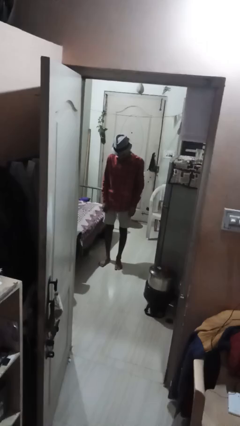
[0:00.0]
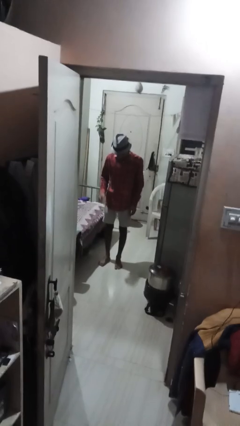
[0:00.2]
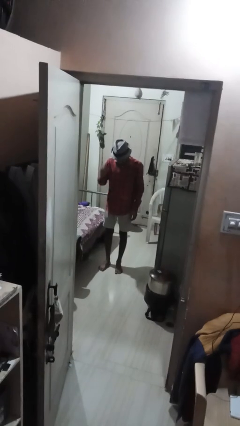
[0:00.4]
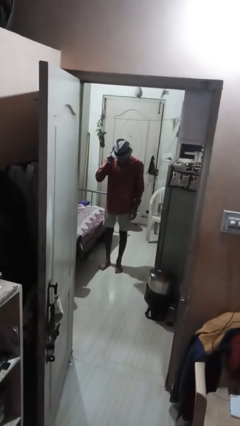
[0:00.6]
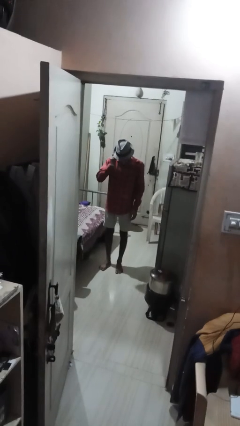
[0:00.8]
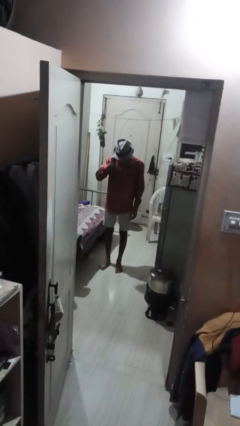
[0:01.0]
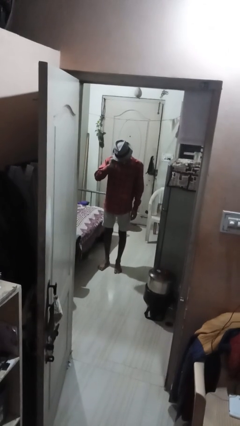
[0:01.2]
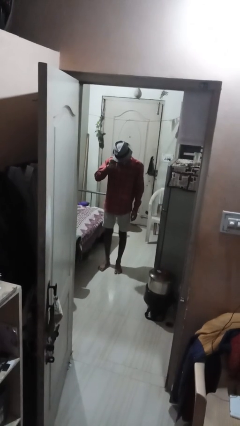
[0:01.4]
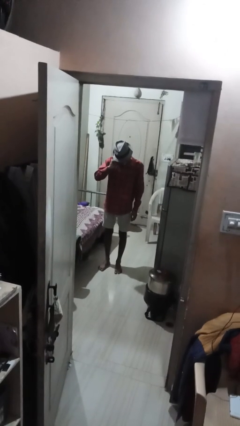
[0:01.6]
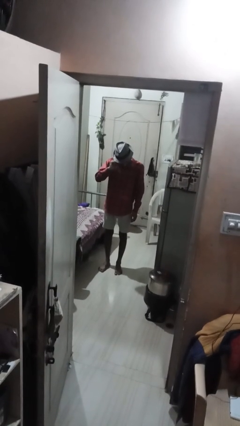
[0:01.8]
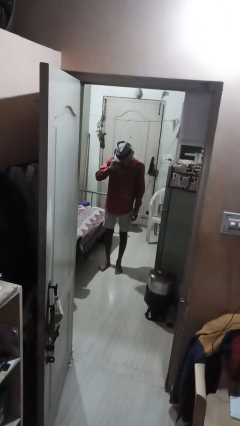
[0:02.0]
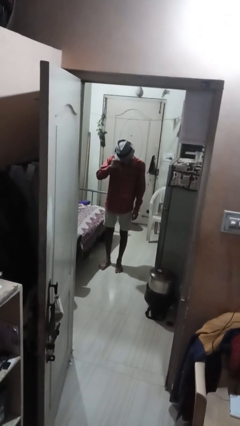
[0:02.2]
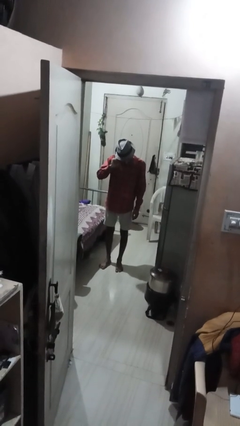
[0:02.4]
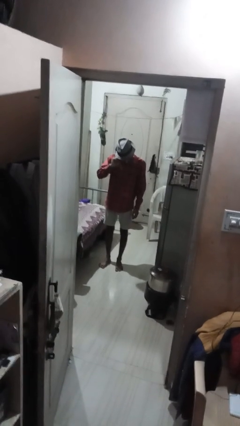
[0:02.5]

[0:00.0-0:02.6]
person touches earlobe

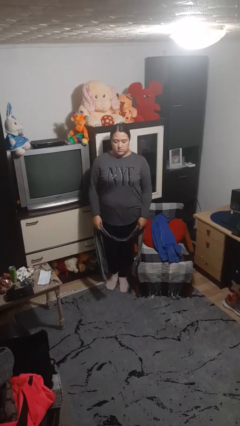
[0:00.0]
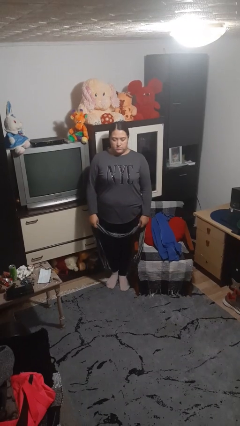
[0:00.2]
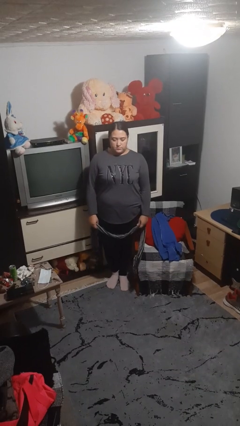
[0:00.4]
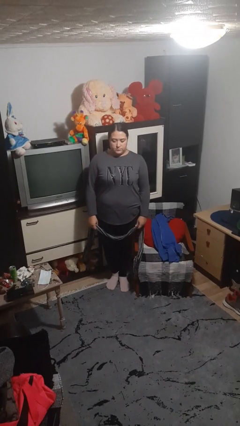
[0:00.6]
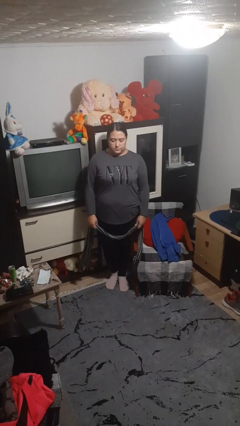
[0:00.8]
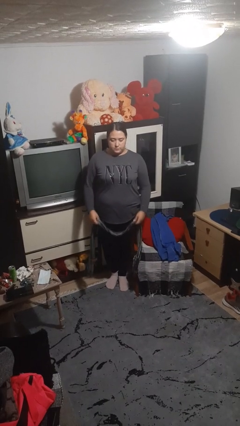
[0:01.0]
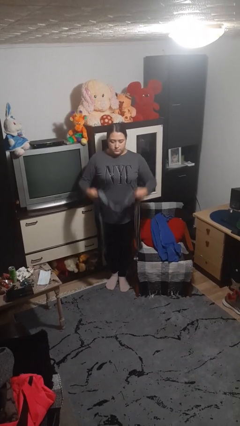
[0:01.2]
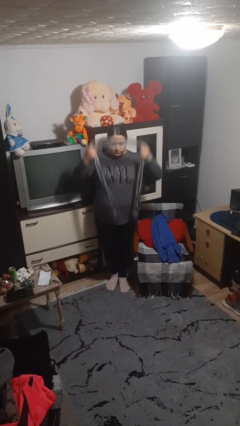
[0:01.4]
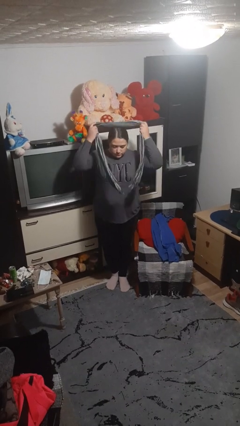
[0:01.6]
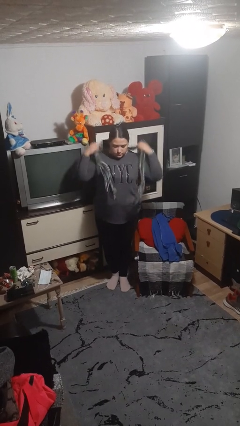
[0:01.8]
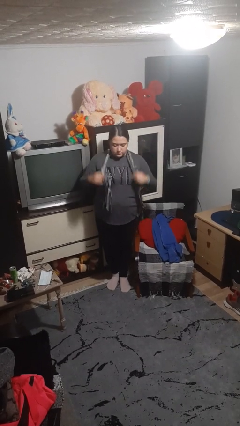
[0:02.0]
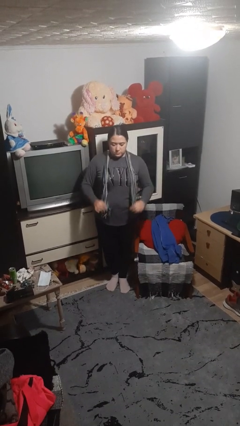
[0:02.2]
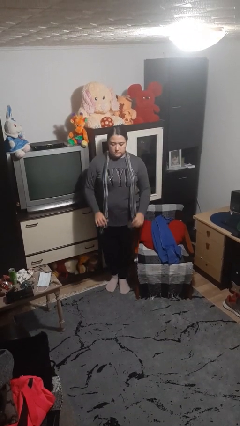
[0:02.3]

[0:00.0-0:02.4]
person puts on scarf

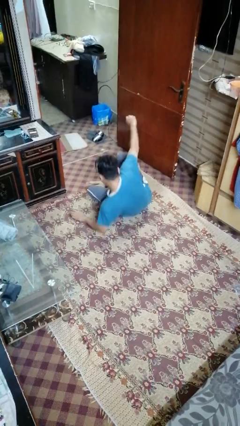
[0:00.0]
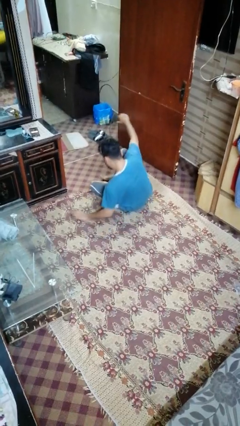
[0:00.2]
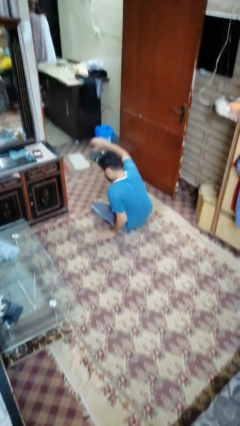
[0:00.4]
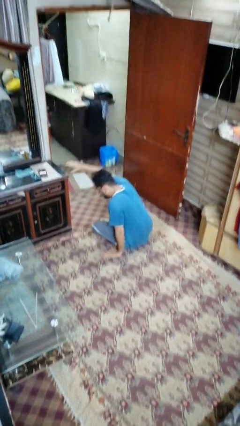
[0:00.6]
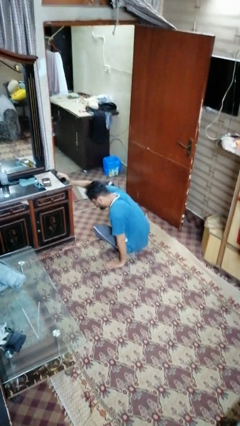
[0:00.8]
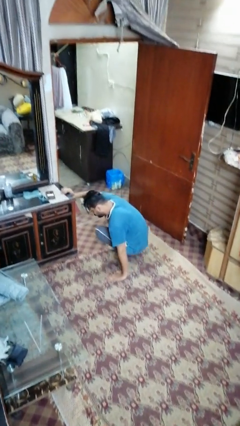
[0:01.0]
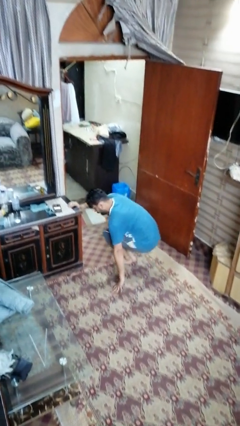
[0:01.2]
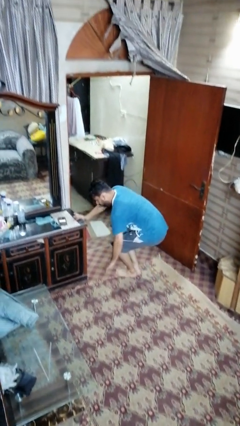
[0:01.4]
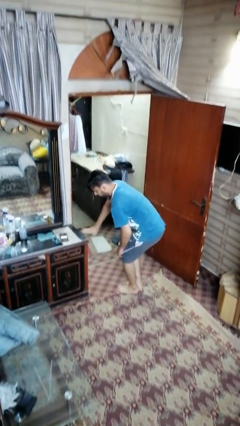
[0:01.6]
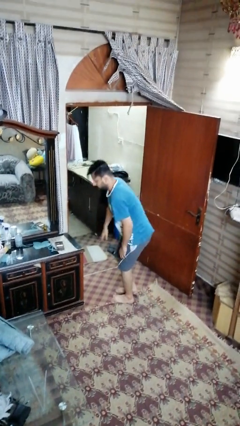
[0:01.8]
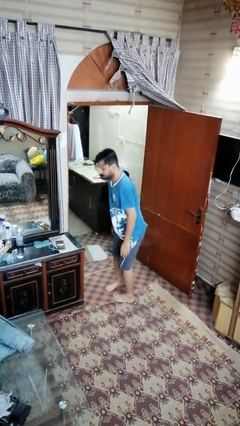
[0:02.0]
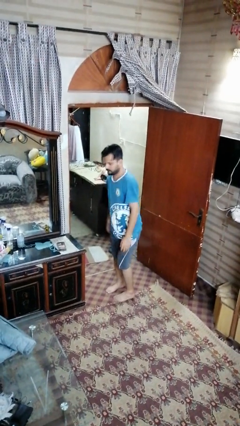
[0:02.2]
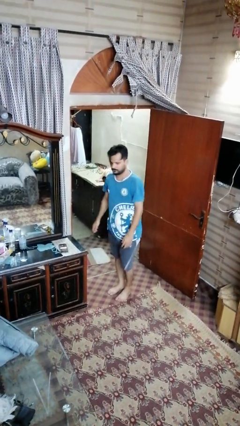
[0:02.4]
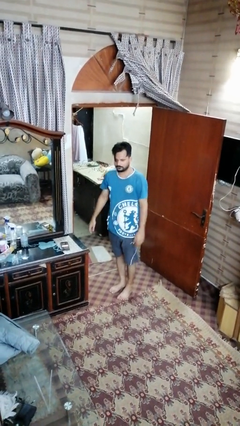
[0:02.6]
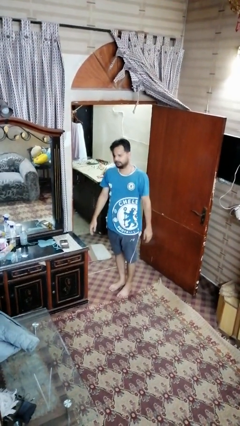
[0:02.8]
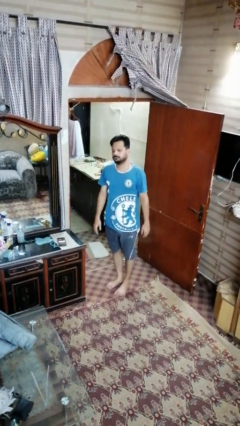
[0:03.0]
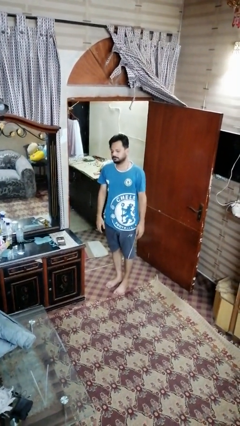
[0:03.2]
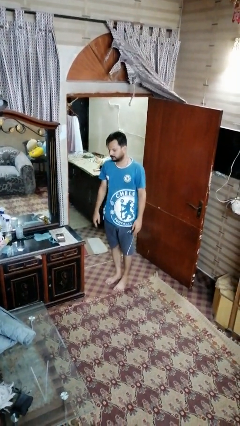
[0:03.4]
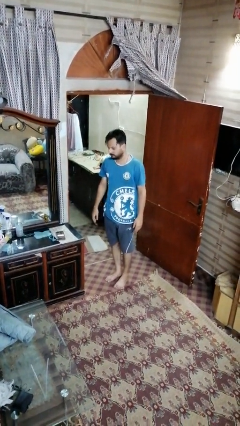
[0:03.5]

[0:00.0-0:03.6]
person stands up from floor

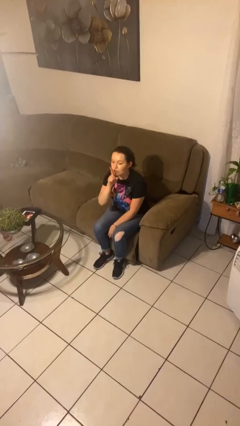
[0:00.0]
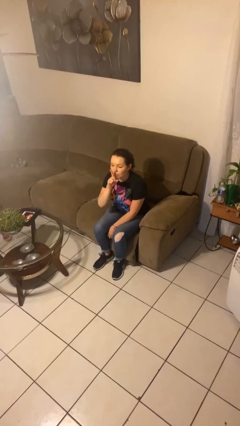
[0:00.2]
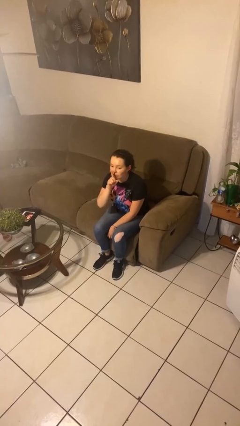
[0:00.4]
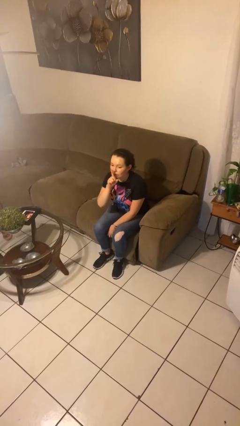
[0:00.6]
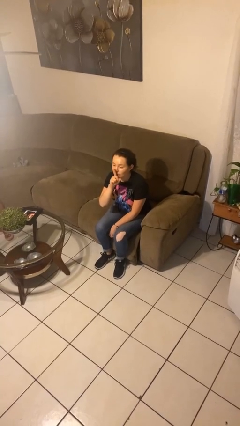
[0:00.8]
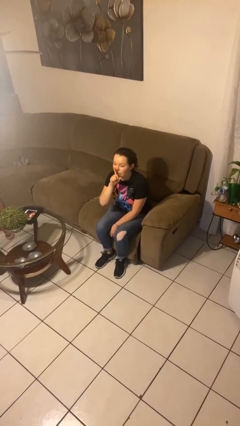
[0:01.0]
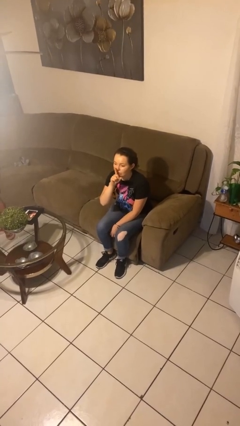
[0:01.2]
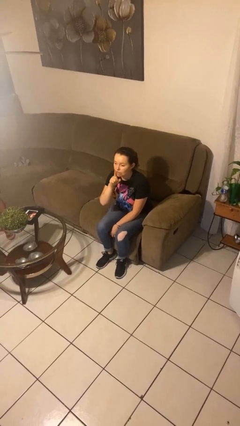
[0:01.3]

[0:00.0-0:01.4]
person gestures be quiet

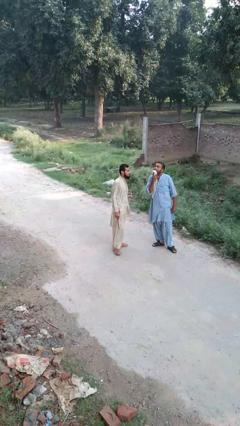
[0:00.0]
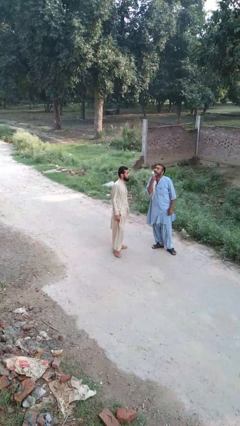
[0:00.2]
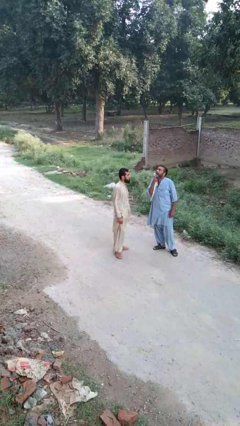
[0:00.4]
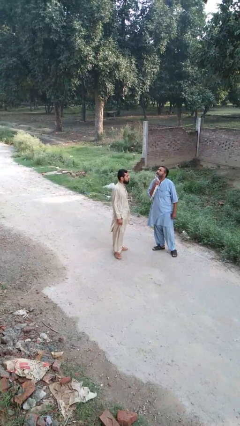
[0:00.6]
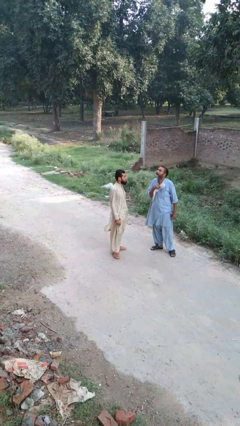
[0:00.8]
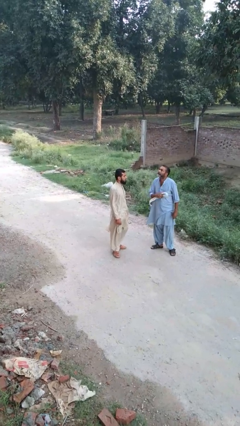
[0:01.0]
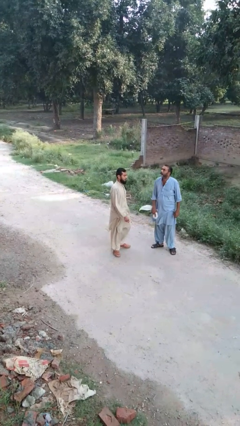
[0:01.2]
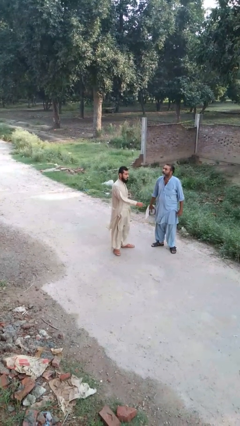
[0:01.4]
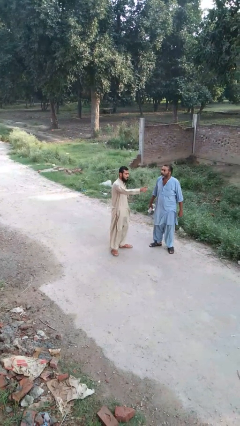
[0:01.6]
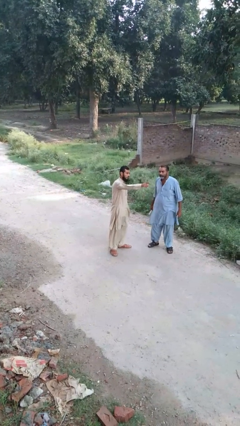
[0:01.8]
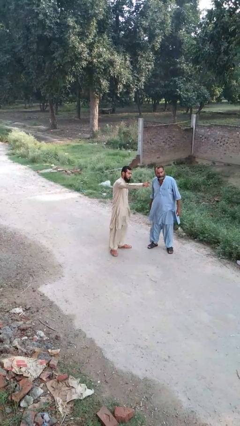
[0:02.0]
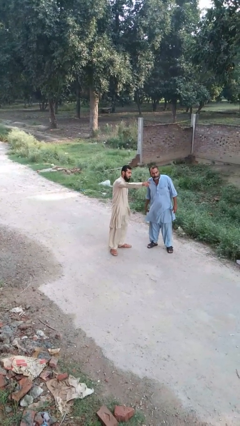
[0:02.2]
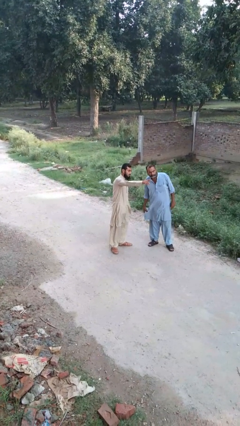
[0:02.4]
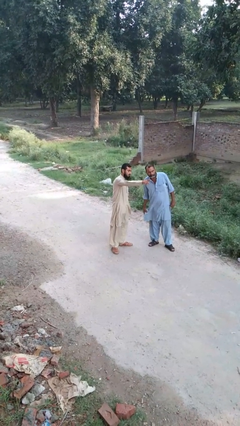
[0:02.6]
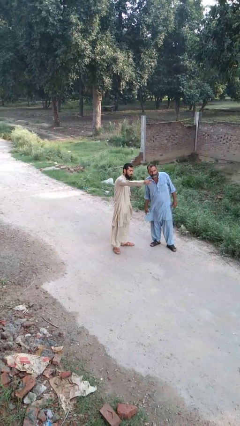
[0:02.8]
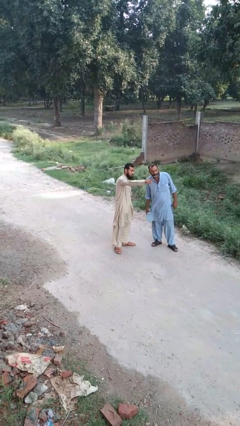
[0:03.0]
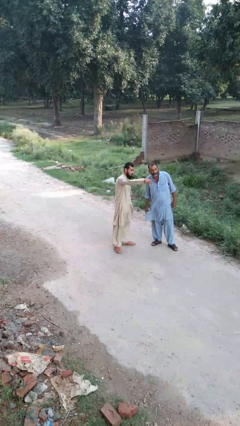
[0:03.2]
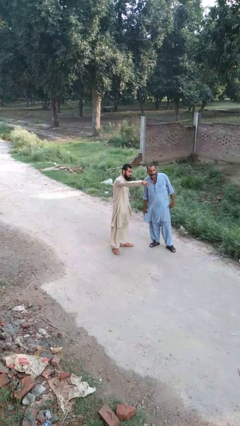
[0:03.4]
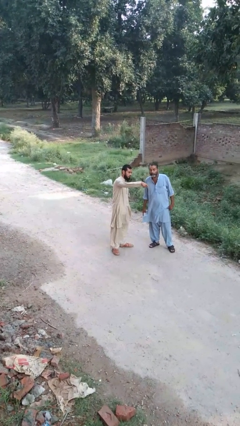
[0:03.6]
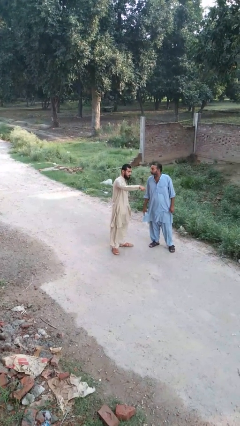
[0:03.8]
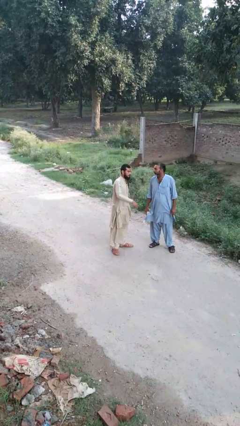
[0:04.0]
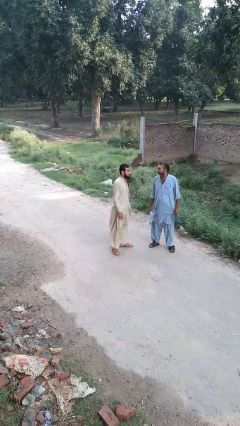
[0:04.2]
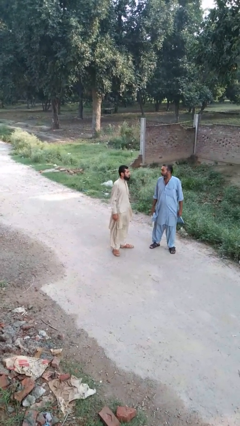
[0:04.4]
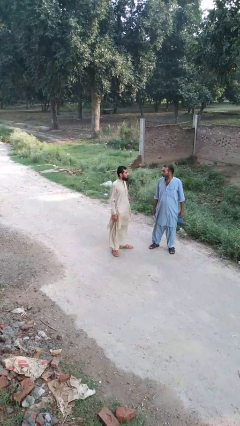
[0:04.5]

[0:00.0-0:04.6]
person points at person

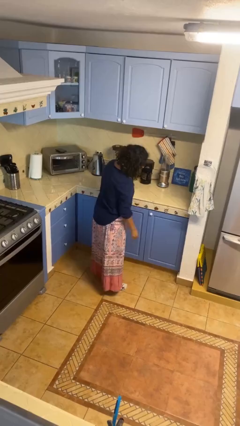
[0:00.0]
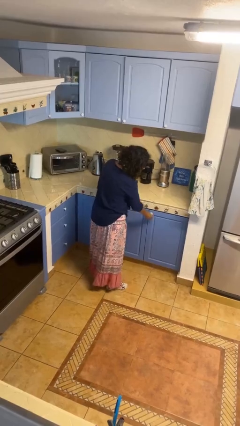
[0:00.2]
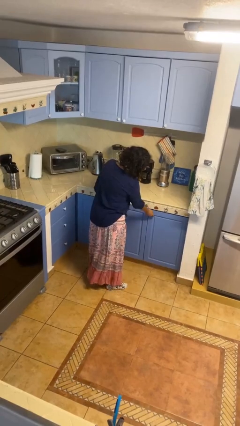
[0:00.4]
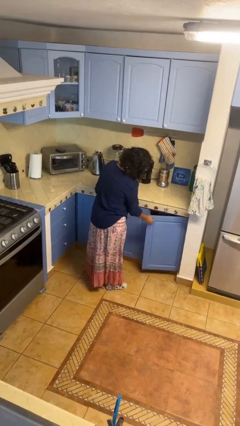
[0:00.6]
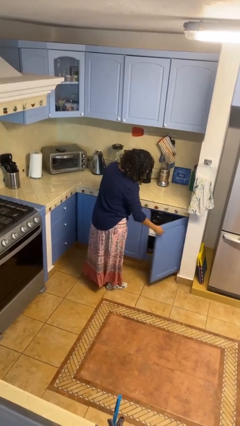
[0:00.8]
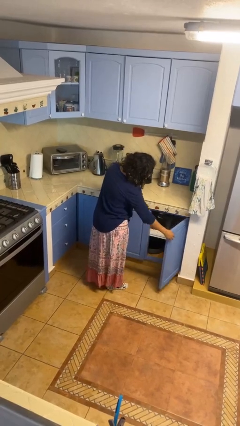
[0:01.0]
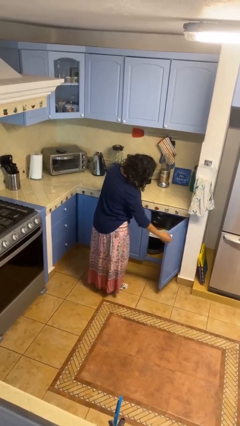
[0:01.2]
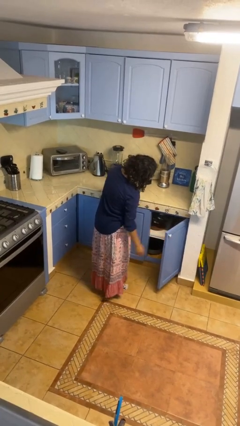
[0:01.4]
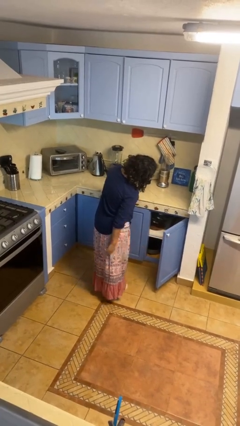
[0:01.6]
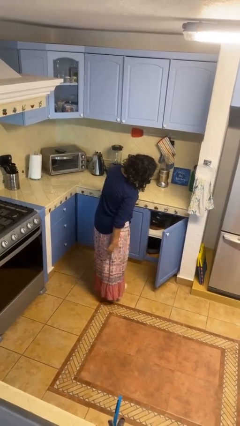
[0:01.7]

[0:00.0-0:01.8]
person opens cabinet

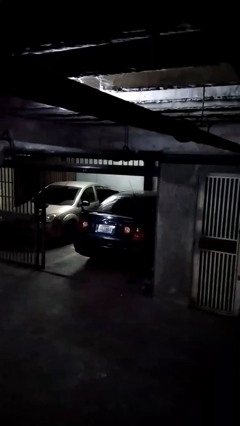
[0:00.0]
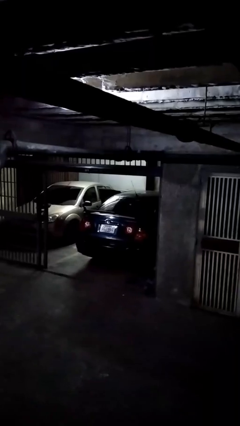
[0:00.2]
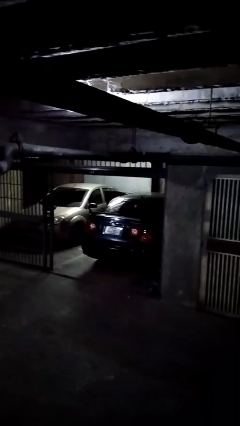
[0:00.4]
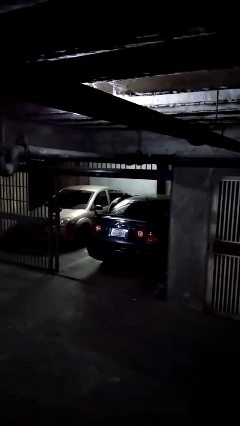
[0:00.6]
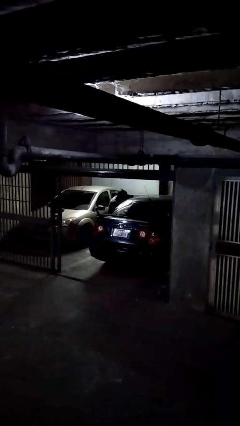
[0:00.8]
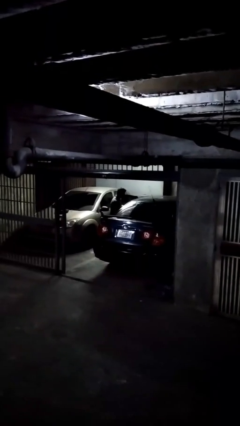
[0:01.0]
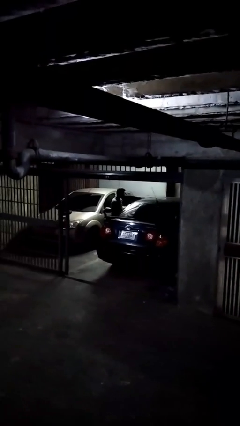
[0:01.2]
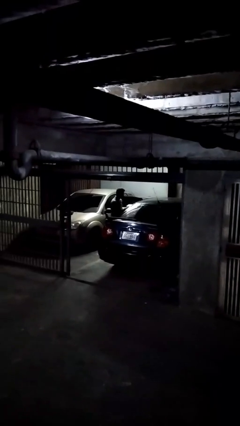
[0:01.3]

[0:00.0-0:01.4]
person unloads car
